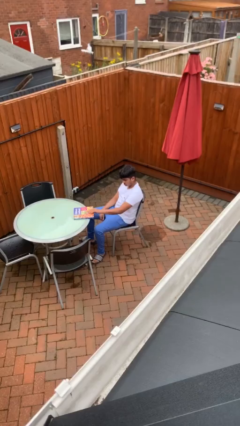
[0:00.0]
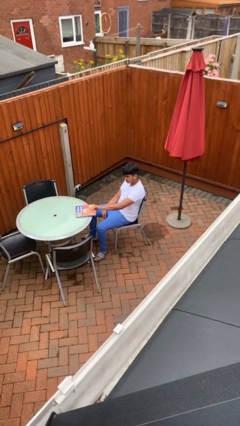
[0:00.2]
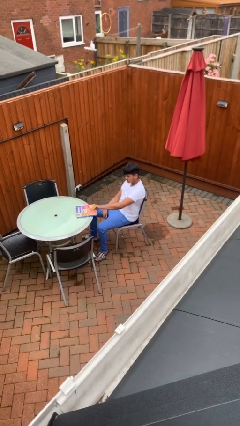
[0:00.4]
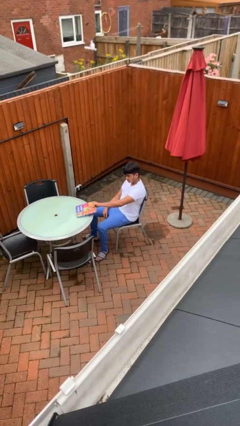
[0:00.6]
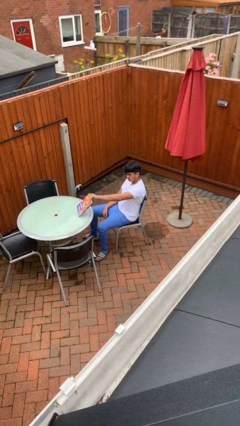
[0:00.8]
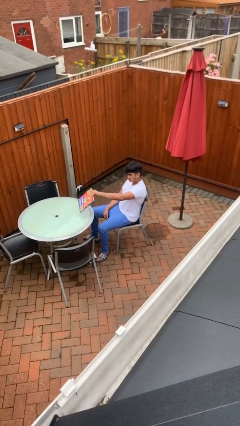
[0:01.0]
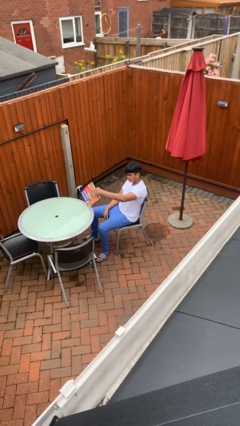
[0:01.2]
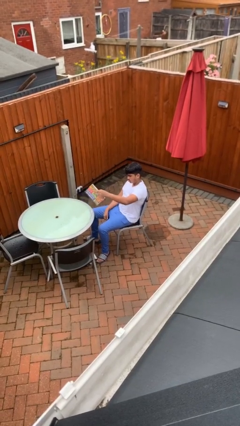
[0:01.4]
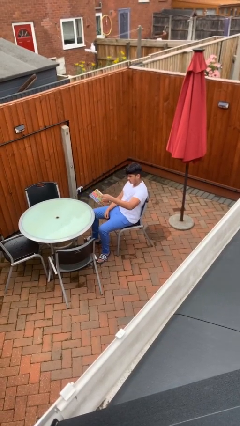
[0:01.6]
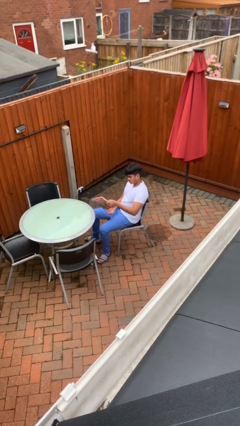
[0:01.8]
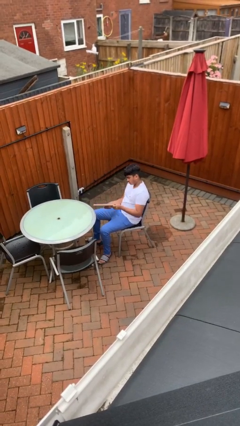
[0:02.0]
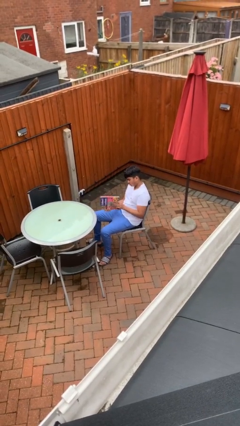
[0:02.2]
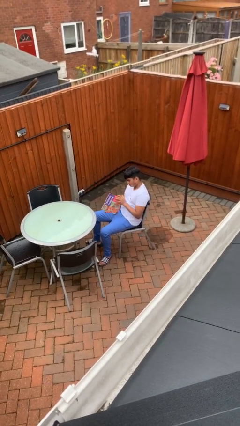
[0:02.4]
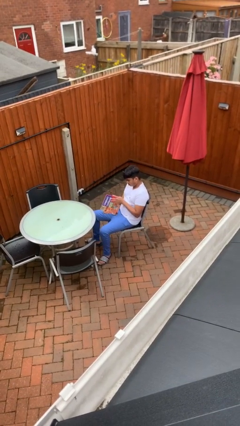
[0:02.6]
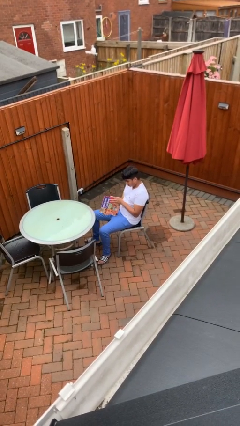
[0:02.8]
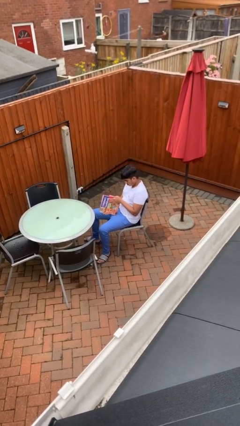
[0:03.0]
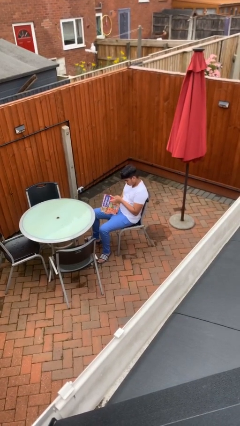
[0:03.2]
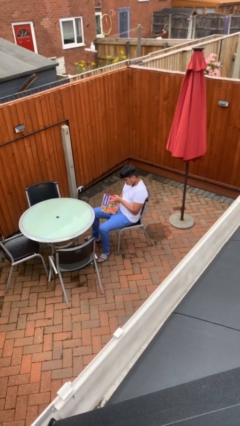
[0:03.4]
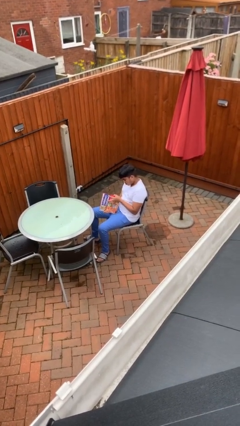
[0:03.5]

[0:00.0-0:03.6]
person picks up object from table

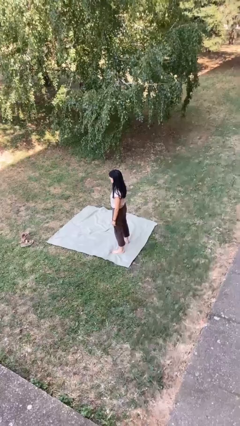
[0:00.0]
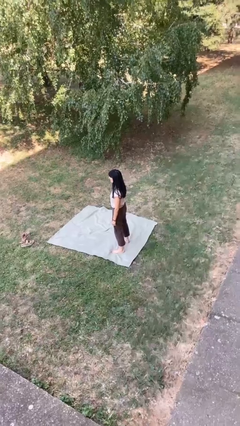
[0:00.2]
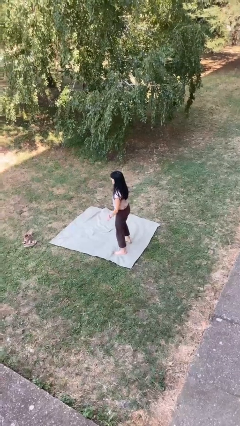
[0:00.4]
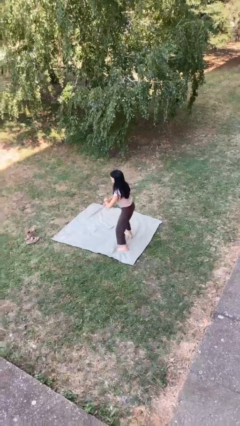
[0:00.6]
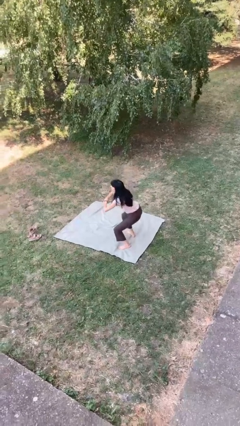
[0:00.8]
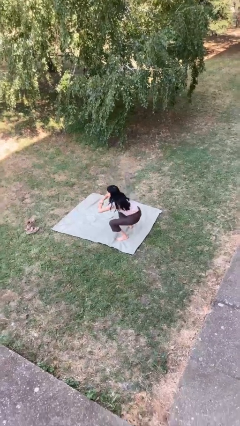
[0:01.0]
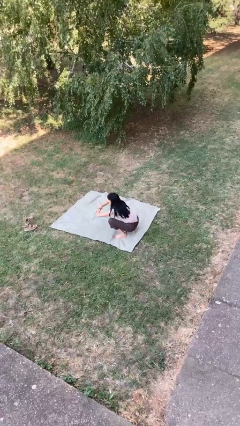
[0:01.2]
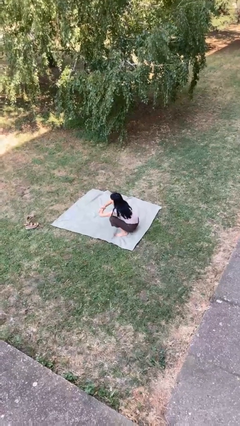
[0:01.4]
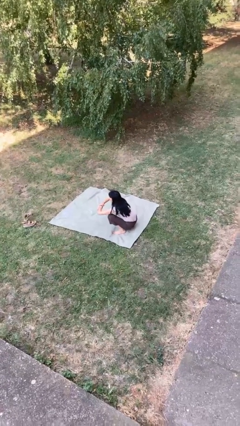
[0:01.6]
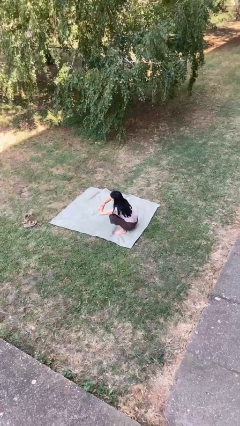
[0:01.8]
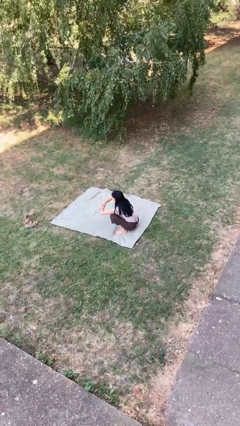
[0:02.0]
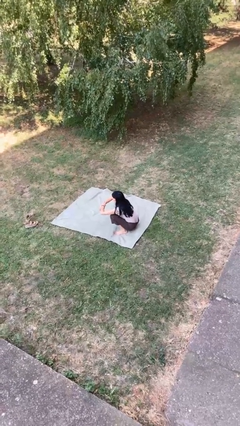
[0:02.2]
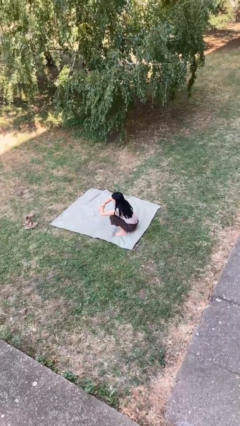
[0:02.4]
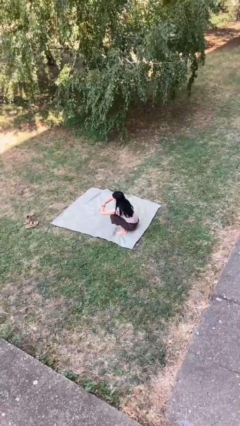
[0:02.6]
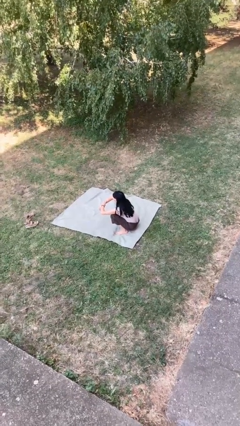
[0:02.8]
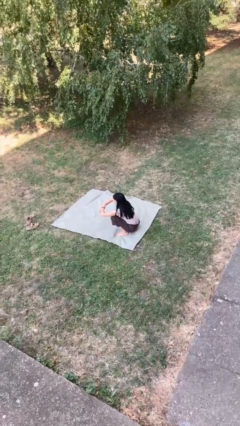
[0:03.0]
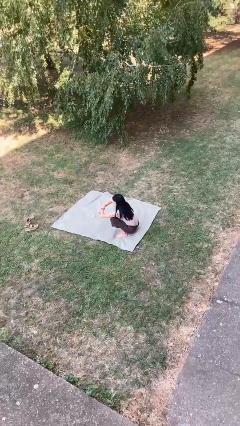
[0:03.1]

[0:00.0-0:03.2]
person squats

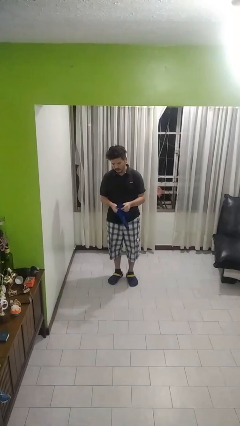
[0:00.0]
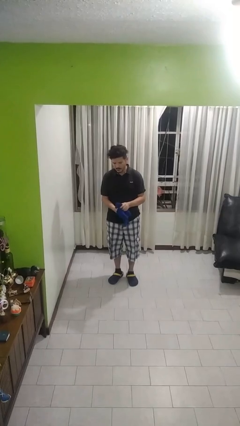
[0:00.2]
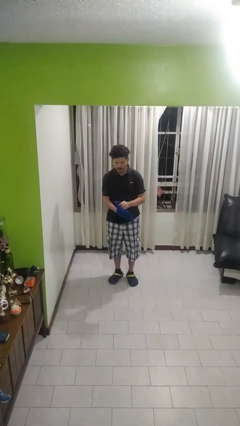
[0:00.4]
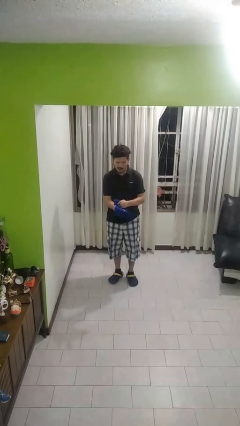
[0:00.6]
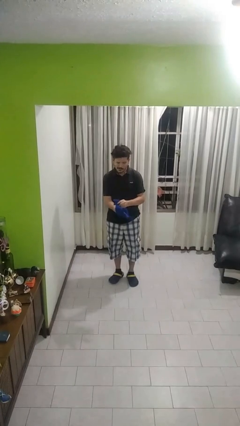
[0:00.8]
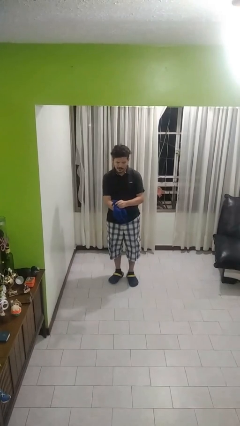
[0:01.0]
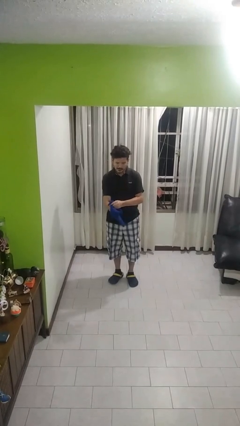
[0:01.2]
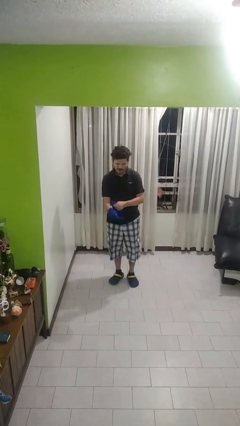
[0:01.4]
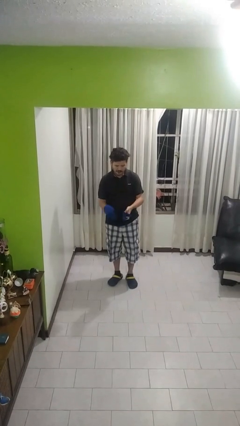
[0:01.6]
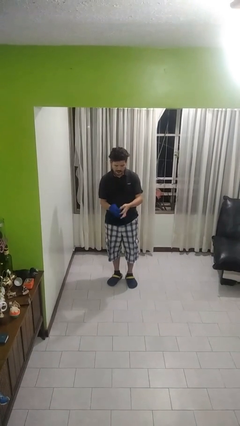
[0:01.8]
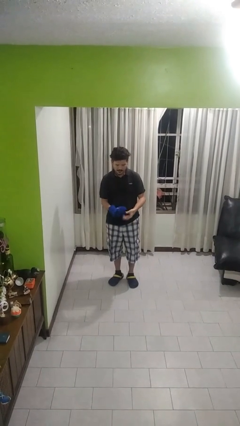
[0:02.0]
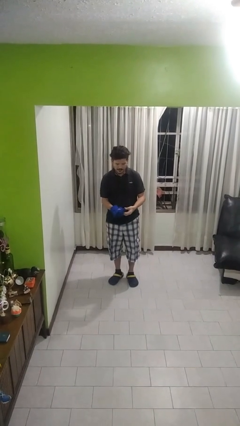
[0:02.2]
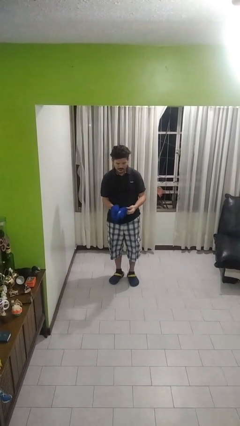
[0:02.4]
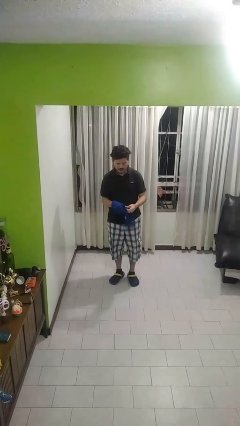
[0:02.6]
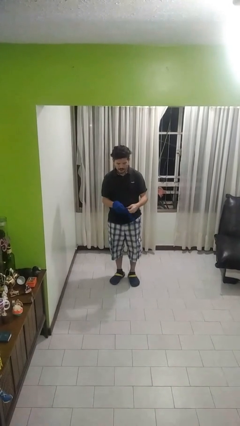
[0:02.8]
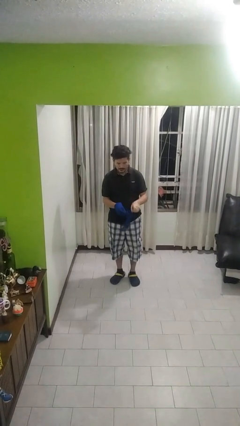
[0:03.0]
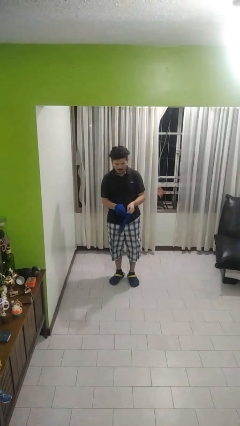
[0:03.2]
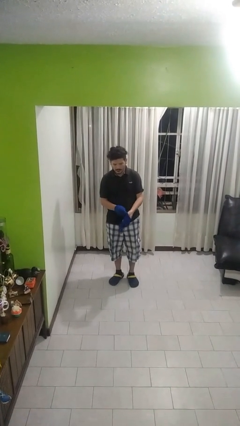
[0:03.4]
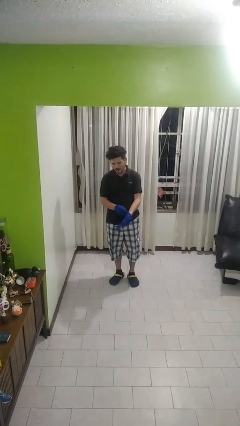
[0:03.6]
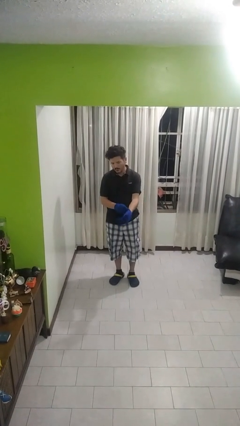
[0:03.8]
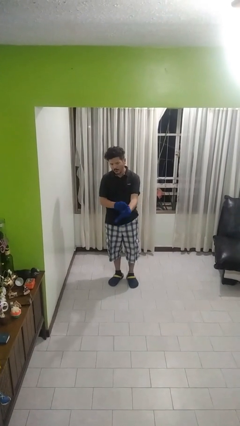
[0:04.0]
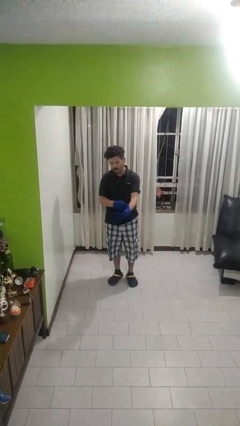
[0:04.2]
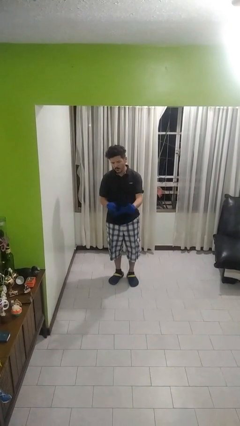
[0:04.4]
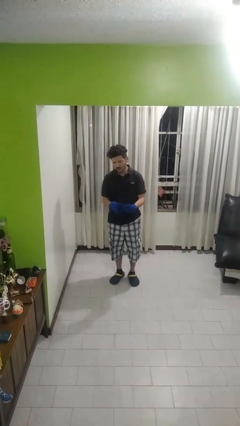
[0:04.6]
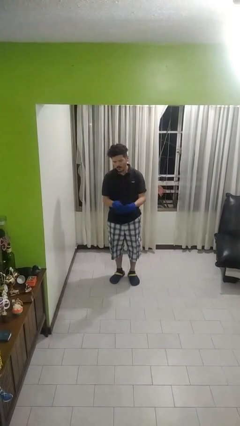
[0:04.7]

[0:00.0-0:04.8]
person puts on gloves

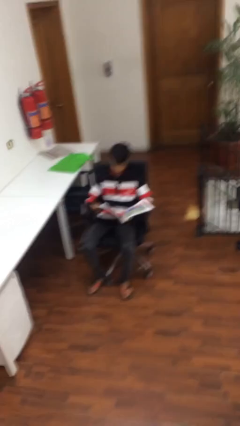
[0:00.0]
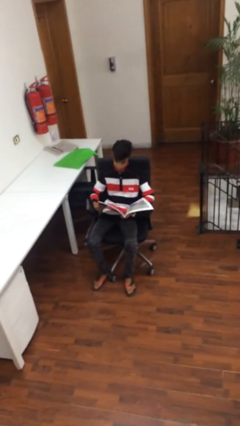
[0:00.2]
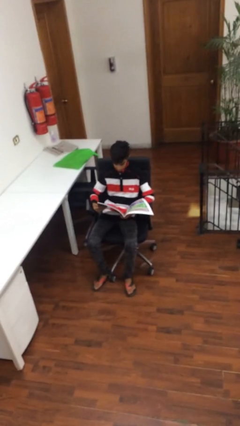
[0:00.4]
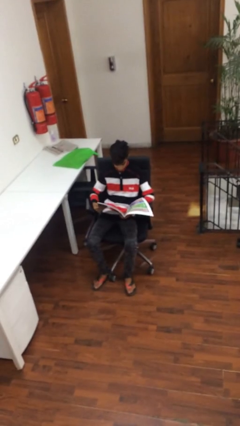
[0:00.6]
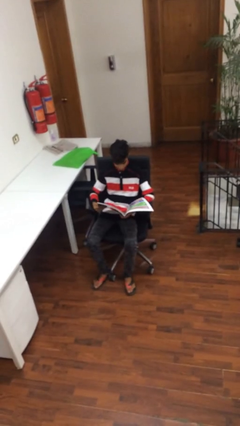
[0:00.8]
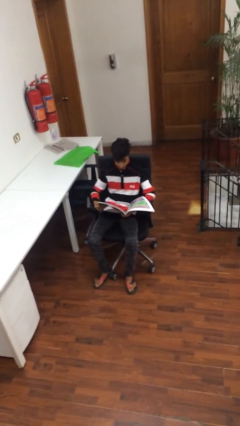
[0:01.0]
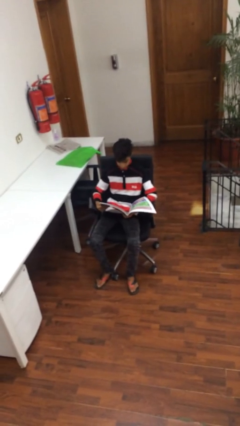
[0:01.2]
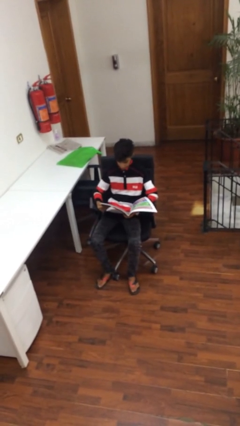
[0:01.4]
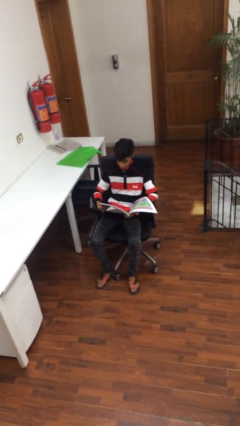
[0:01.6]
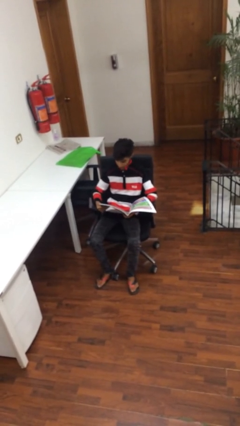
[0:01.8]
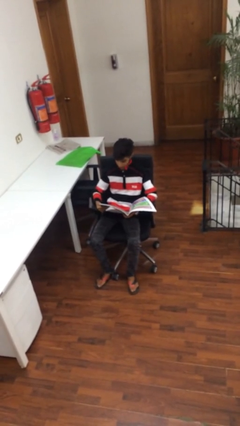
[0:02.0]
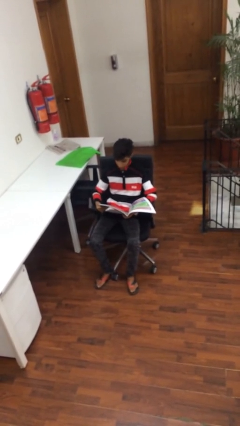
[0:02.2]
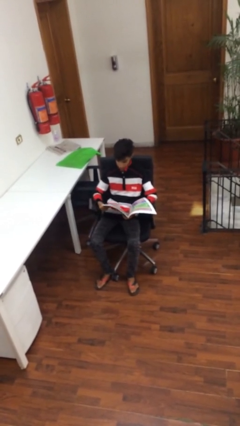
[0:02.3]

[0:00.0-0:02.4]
person reads document

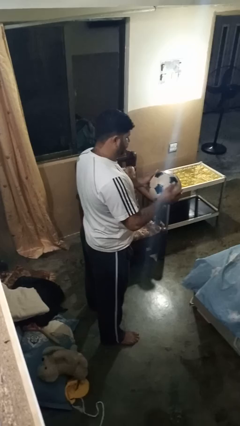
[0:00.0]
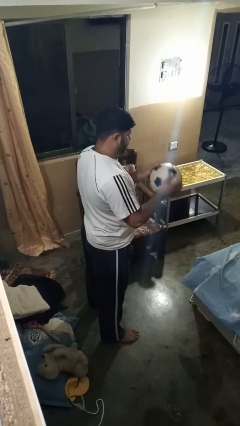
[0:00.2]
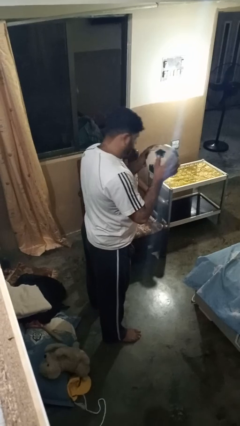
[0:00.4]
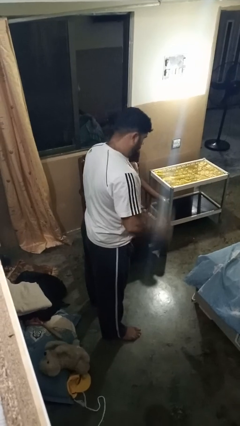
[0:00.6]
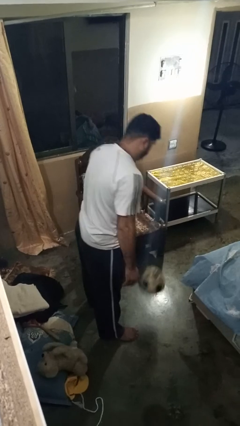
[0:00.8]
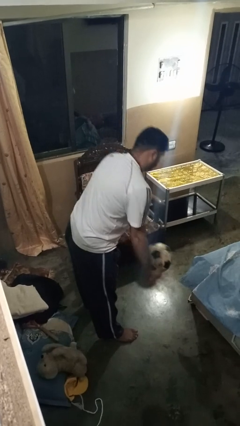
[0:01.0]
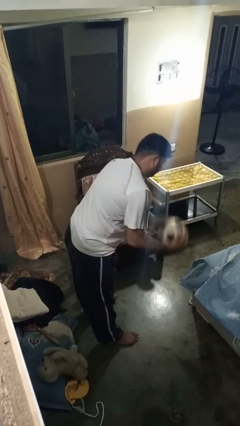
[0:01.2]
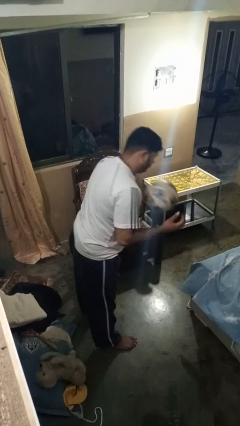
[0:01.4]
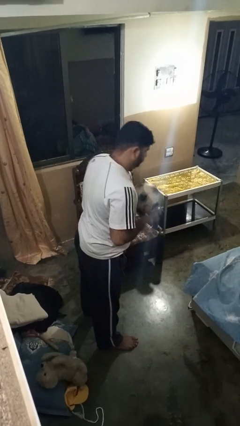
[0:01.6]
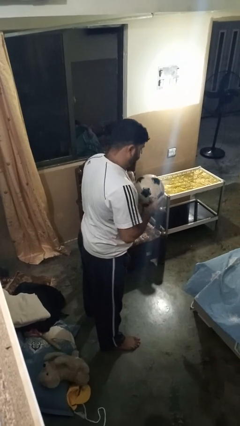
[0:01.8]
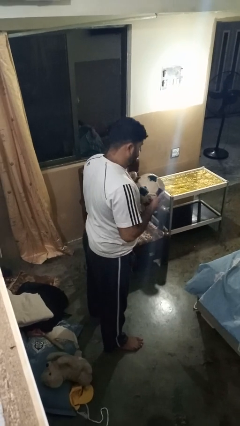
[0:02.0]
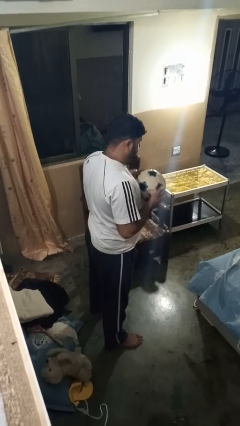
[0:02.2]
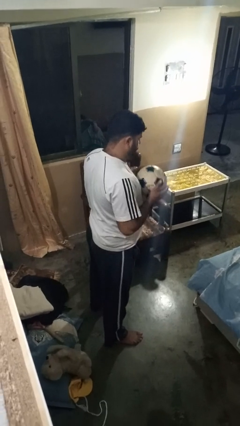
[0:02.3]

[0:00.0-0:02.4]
person bounces ball on floor

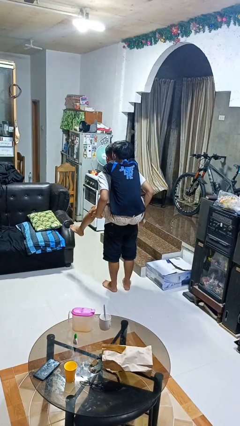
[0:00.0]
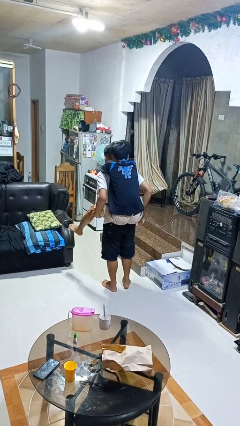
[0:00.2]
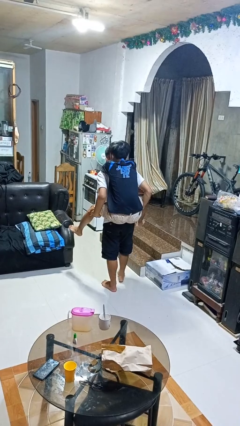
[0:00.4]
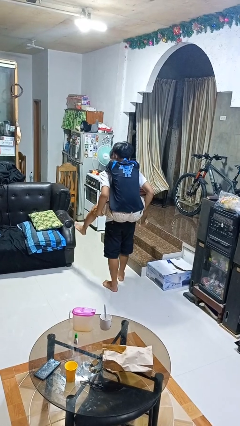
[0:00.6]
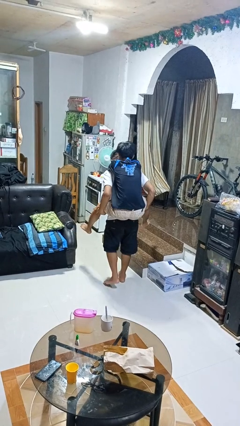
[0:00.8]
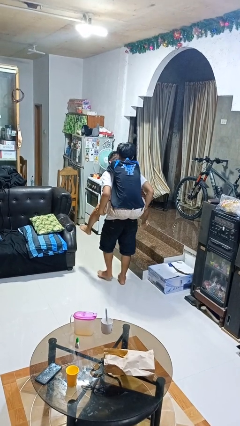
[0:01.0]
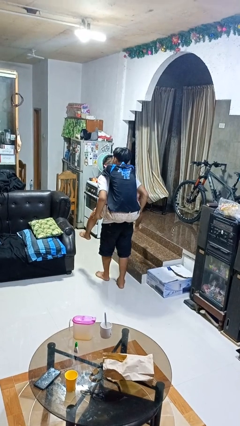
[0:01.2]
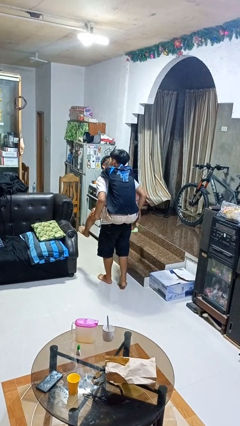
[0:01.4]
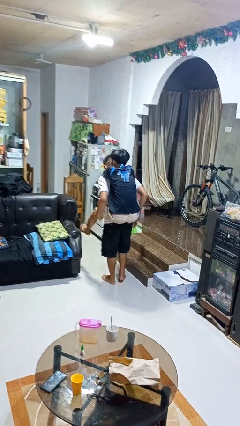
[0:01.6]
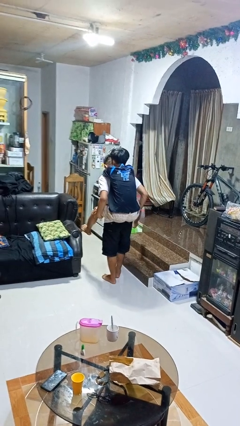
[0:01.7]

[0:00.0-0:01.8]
person carries person on back
